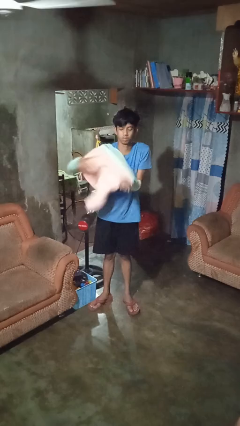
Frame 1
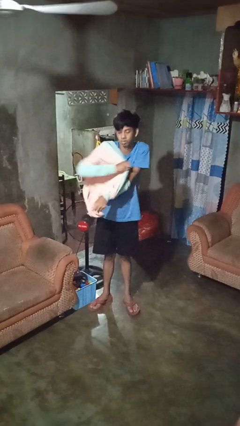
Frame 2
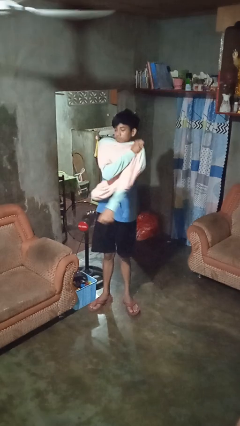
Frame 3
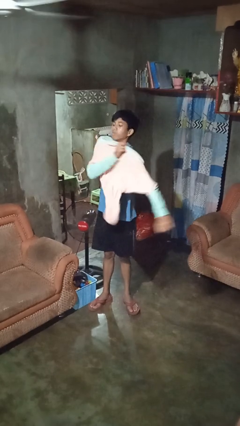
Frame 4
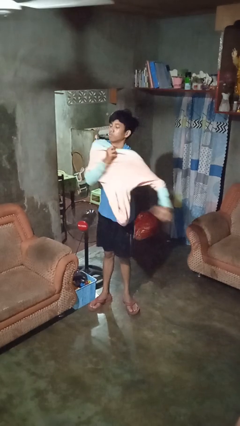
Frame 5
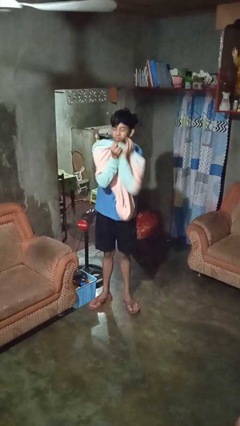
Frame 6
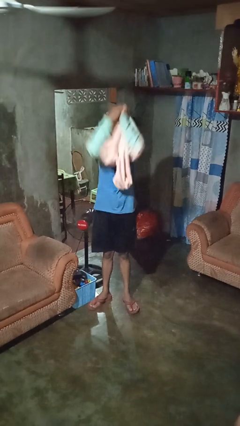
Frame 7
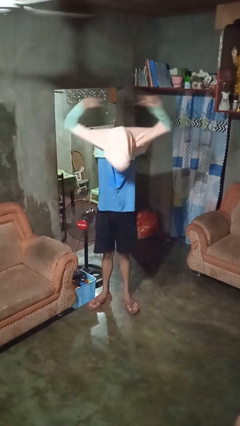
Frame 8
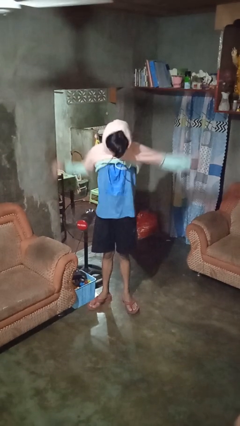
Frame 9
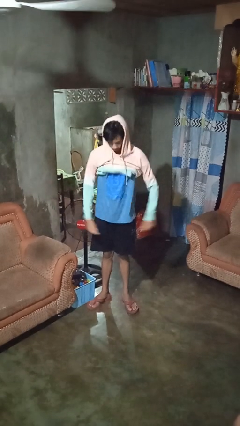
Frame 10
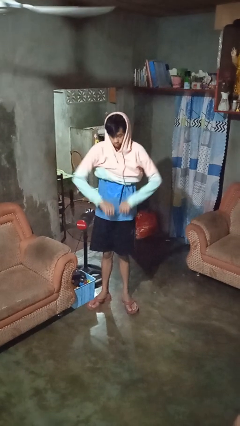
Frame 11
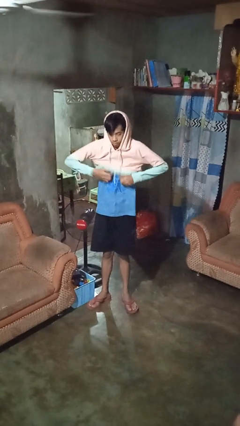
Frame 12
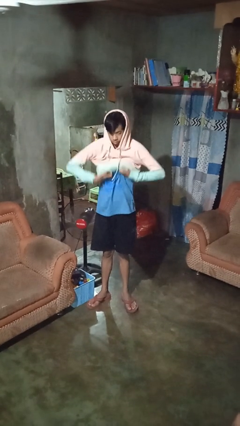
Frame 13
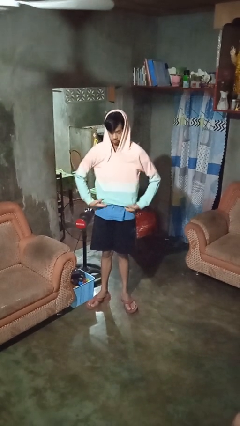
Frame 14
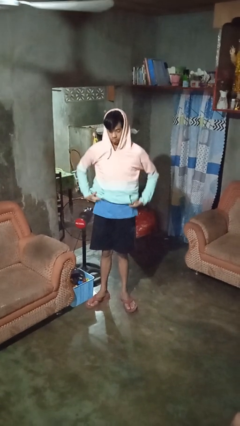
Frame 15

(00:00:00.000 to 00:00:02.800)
person puts on hoodie

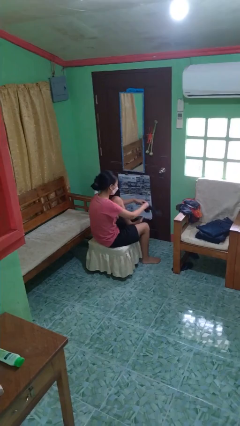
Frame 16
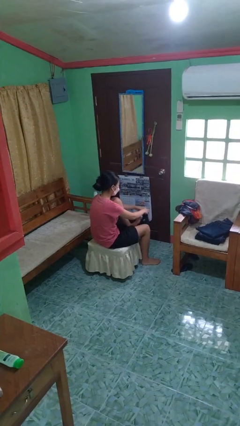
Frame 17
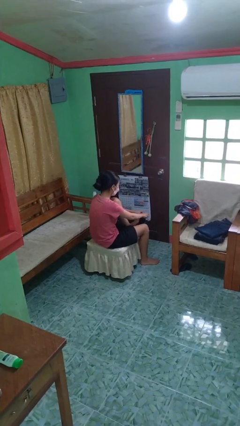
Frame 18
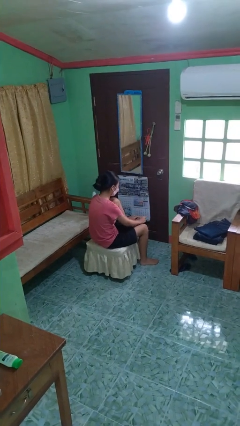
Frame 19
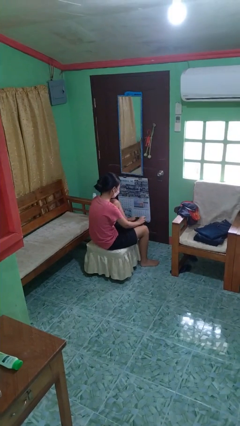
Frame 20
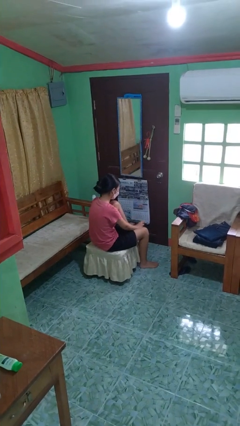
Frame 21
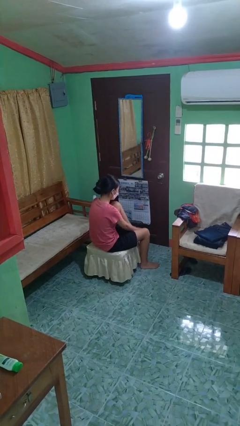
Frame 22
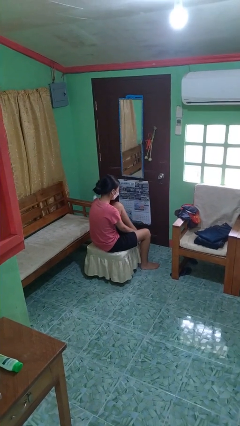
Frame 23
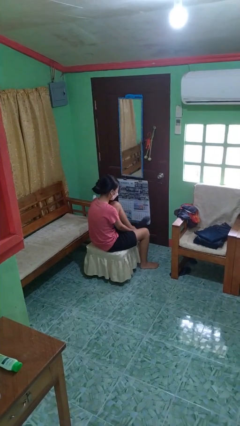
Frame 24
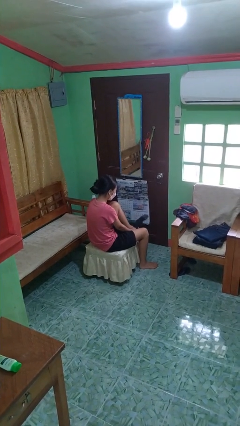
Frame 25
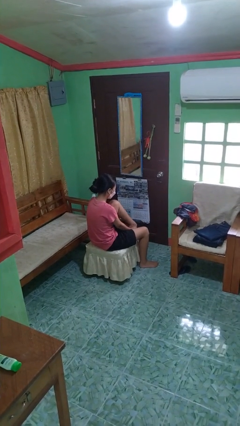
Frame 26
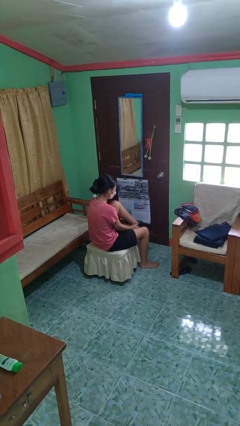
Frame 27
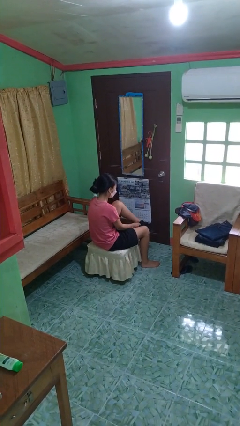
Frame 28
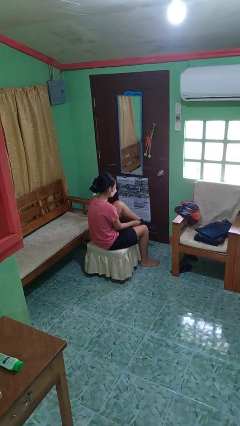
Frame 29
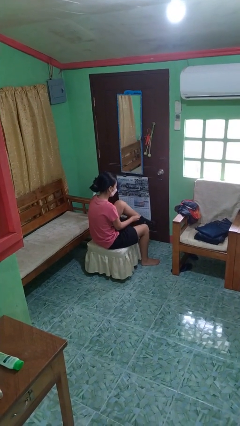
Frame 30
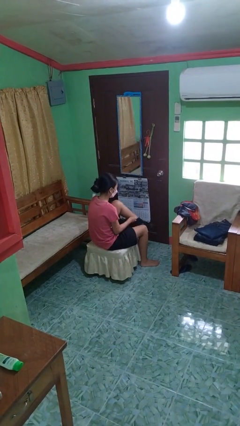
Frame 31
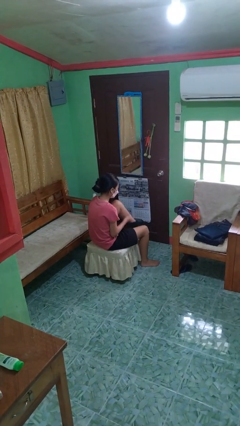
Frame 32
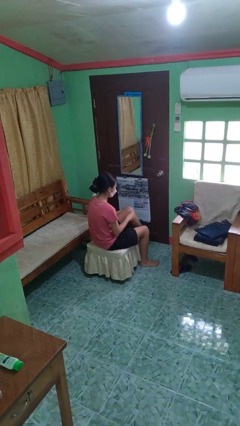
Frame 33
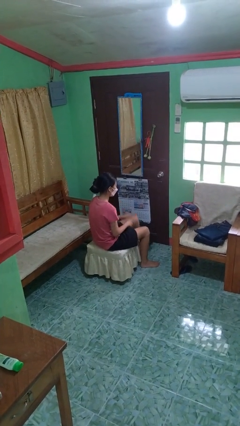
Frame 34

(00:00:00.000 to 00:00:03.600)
person puts on socks

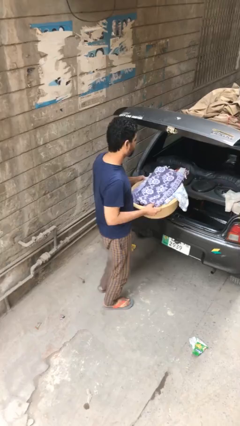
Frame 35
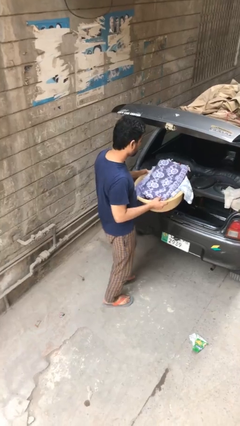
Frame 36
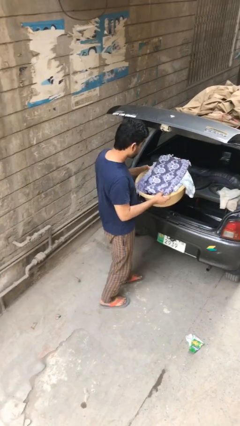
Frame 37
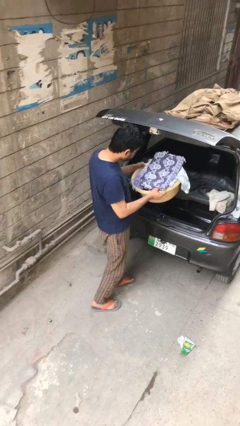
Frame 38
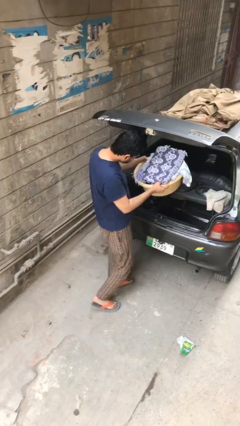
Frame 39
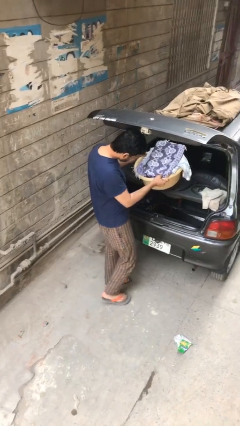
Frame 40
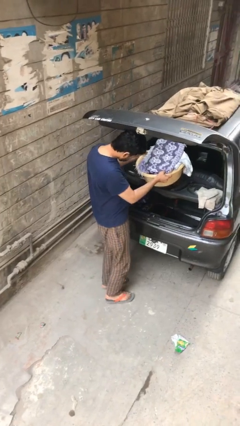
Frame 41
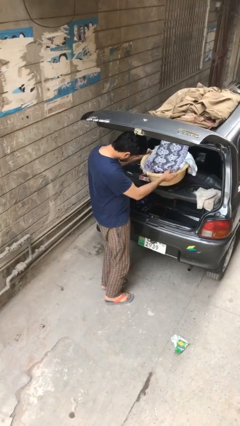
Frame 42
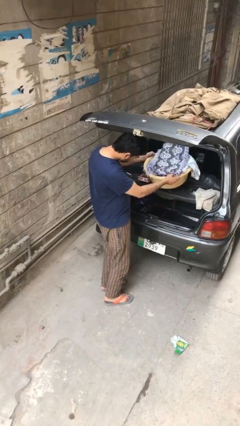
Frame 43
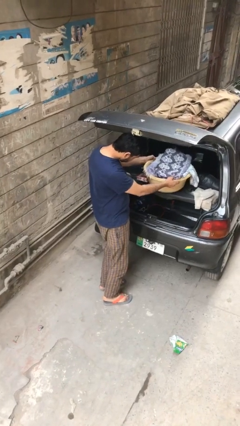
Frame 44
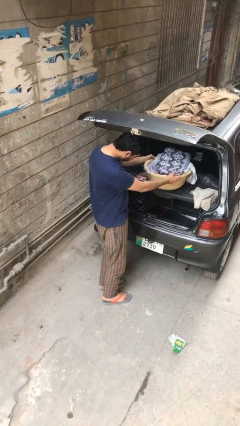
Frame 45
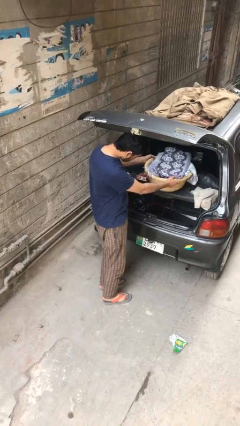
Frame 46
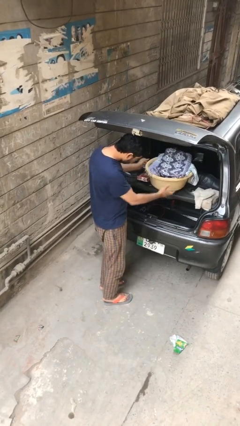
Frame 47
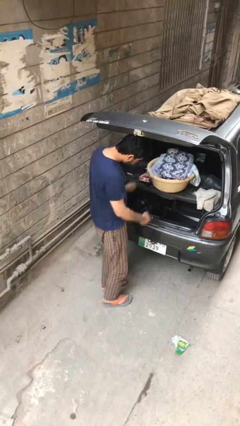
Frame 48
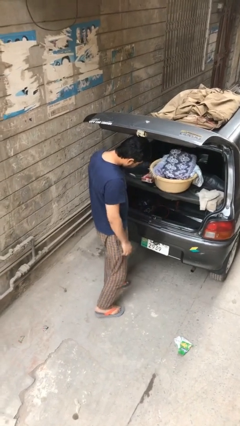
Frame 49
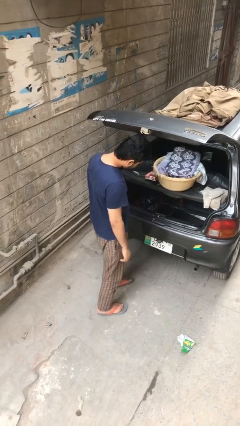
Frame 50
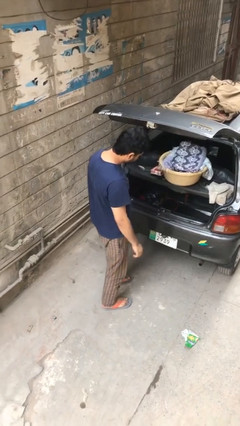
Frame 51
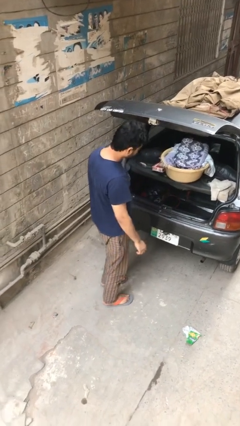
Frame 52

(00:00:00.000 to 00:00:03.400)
person loads car

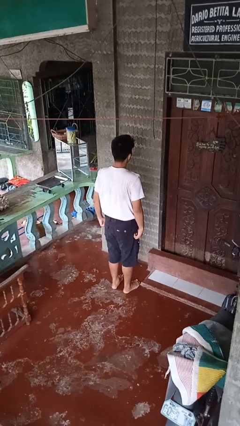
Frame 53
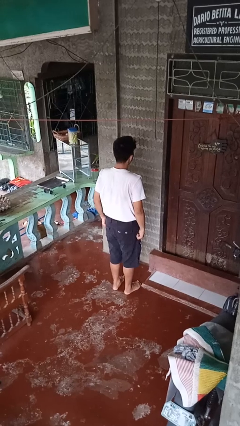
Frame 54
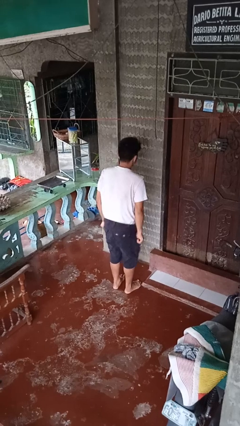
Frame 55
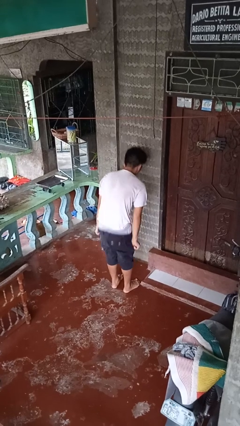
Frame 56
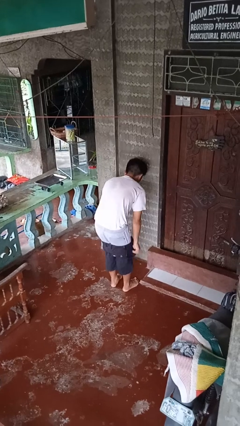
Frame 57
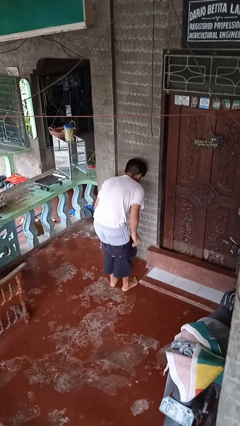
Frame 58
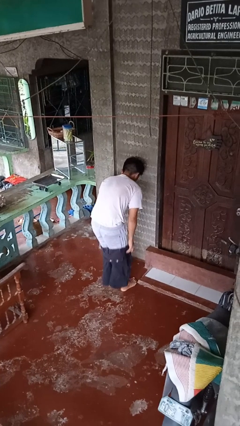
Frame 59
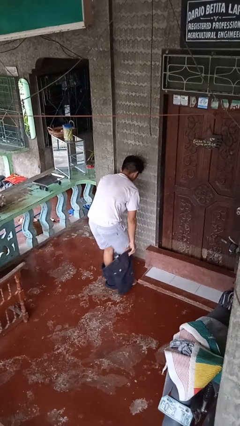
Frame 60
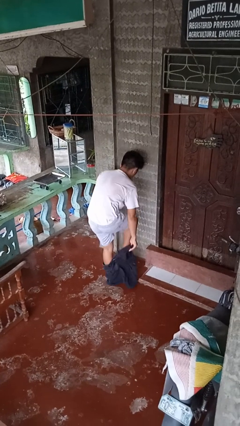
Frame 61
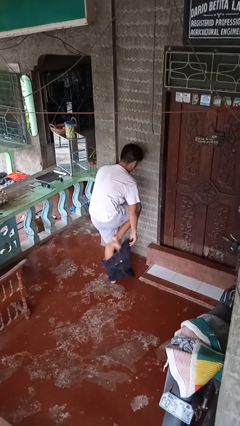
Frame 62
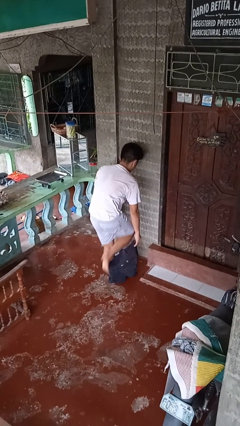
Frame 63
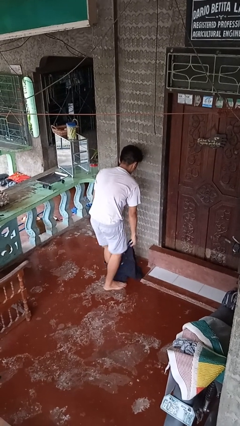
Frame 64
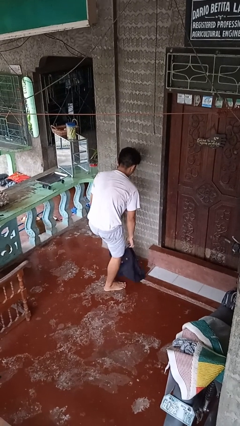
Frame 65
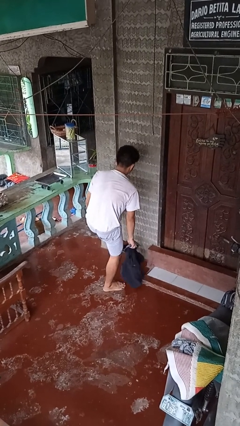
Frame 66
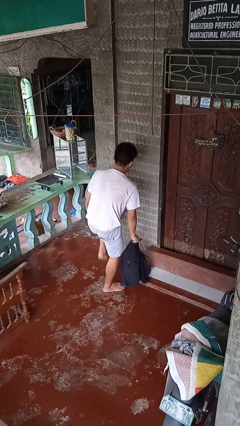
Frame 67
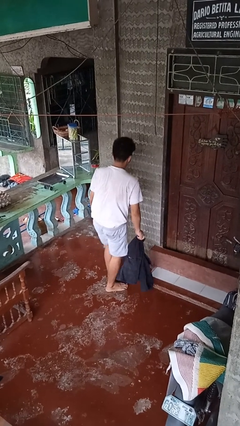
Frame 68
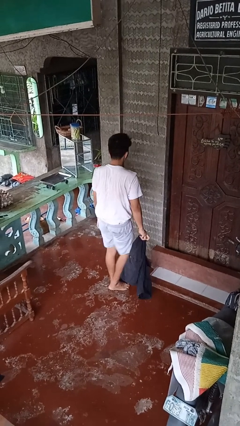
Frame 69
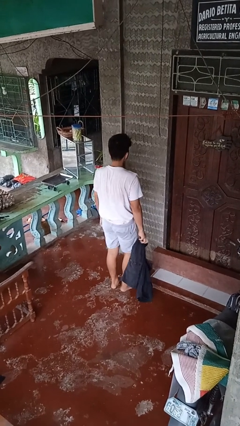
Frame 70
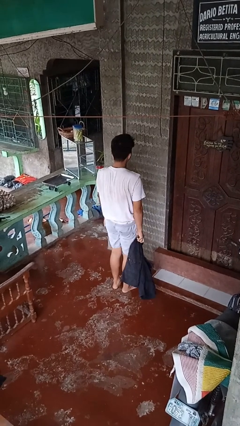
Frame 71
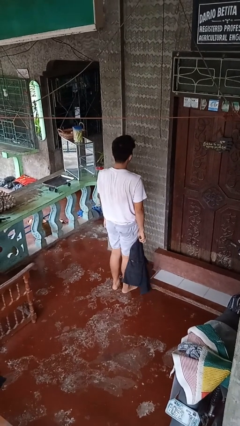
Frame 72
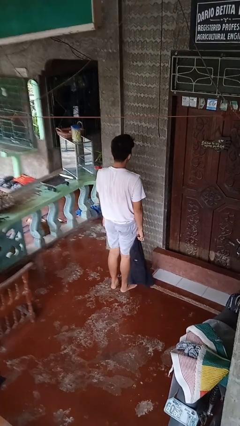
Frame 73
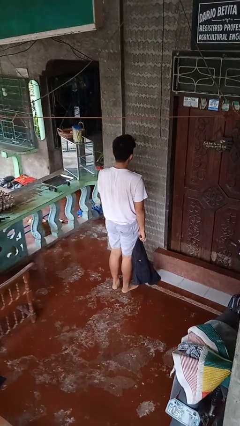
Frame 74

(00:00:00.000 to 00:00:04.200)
person takes off pants

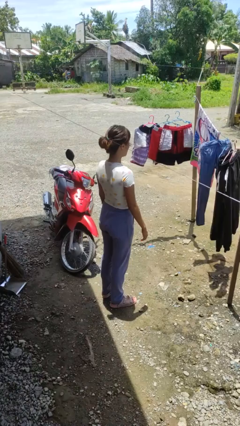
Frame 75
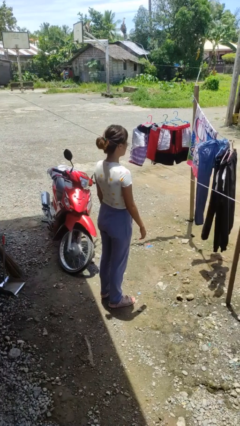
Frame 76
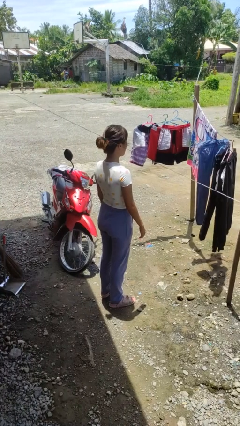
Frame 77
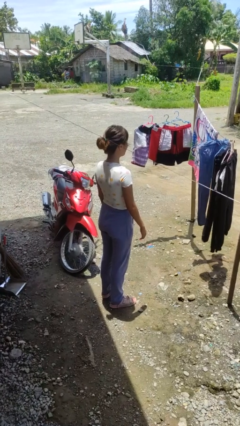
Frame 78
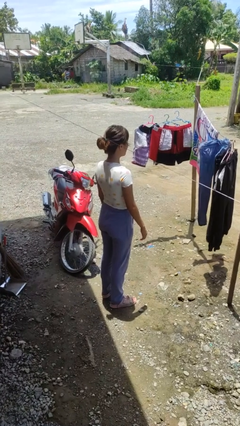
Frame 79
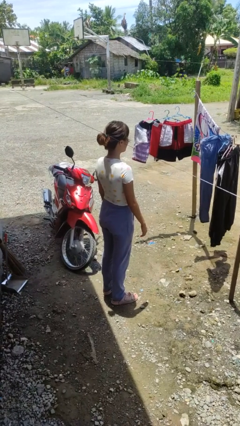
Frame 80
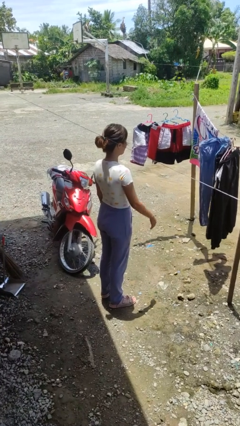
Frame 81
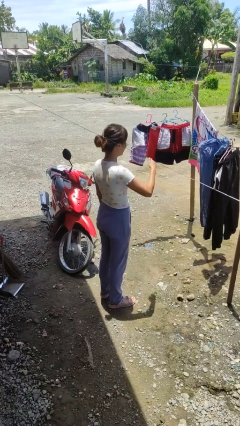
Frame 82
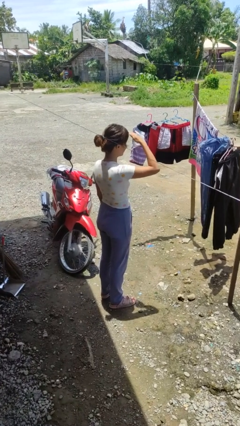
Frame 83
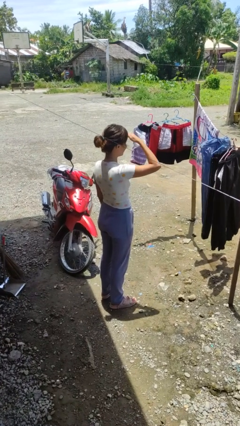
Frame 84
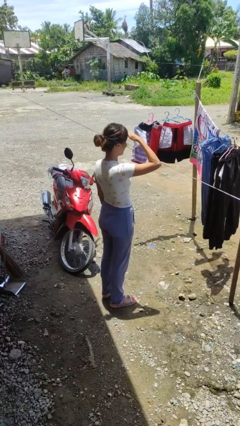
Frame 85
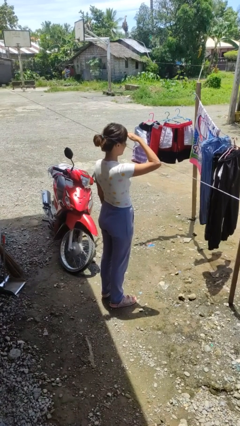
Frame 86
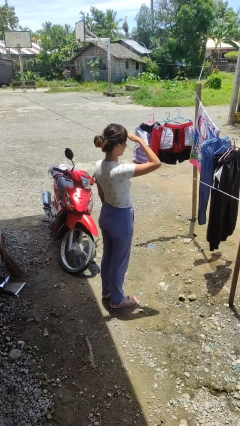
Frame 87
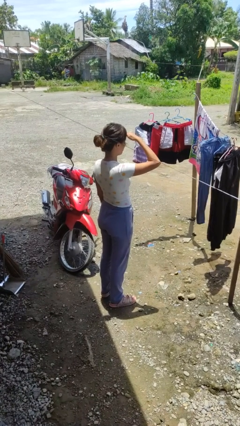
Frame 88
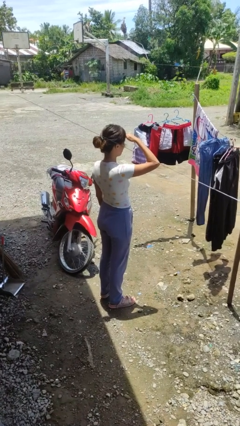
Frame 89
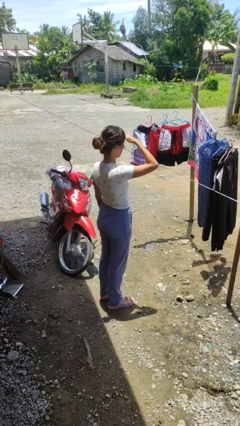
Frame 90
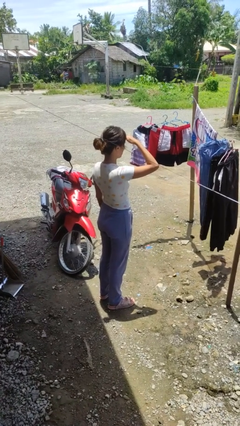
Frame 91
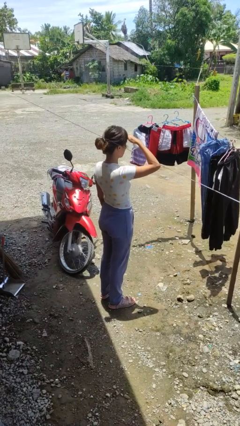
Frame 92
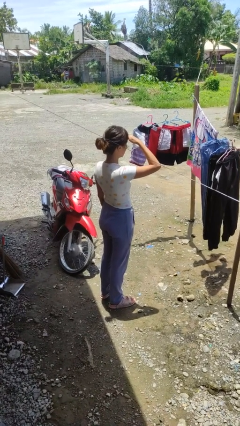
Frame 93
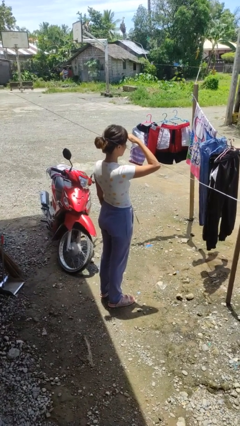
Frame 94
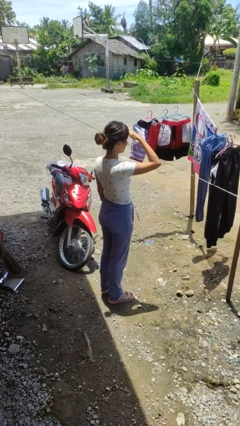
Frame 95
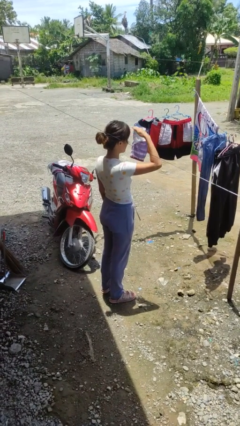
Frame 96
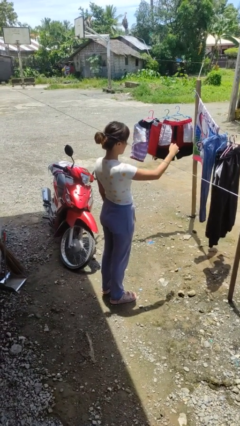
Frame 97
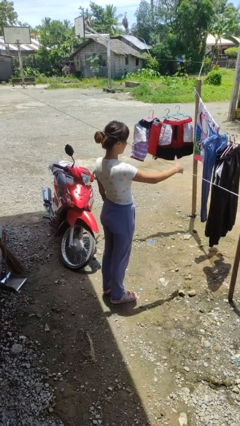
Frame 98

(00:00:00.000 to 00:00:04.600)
person shades eyes
